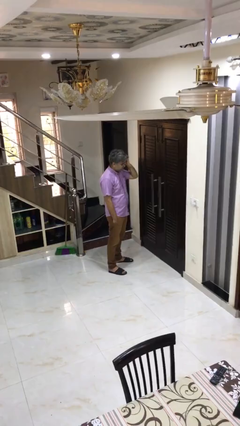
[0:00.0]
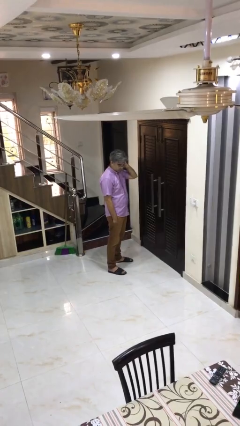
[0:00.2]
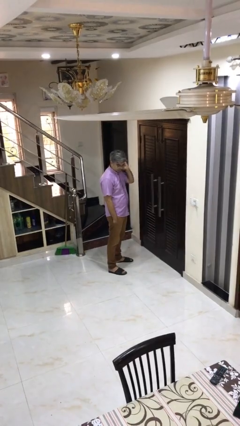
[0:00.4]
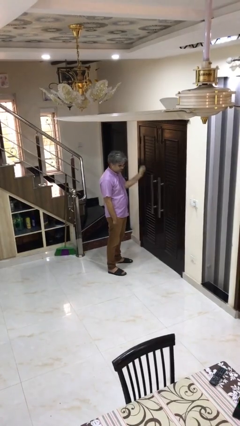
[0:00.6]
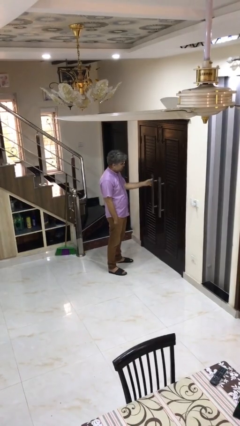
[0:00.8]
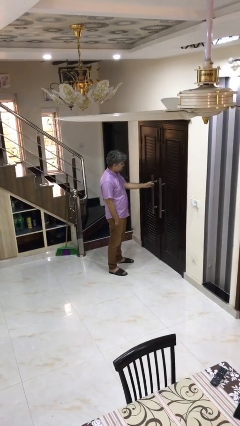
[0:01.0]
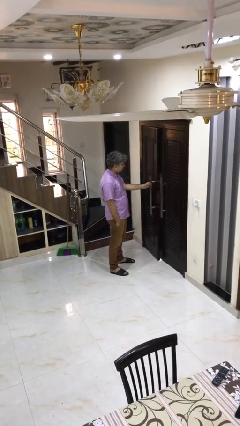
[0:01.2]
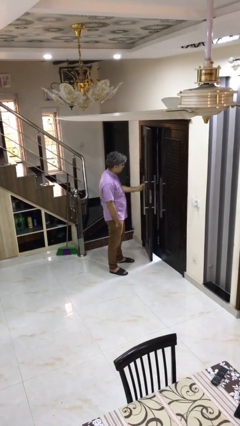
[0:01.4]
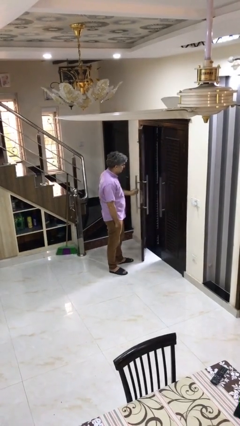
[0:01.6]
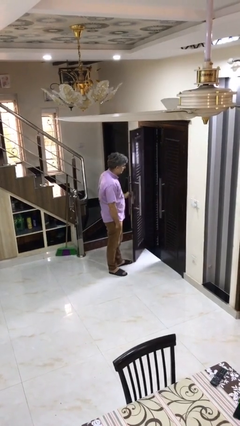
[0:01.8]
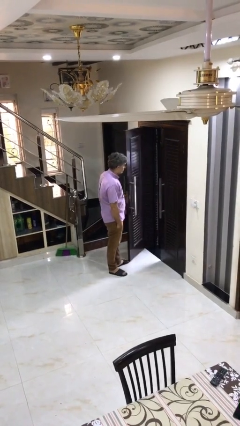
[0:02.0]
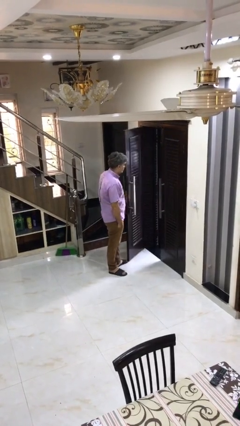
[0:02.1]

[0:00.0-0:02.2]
person opens facility door

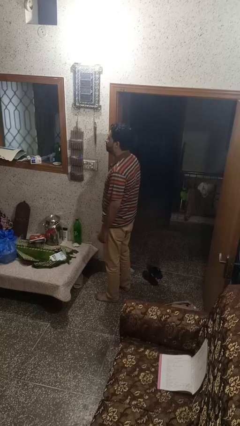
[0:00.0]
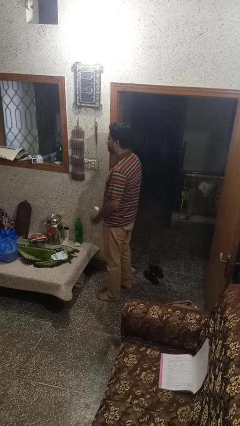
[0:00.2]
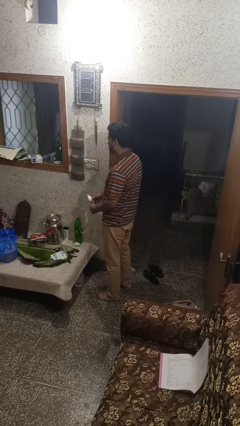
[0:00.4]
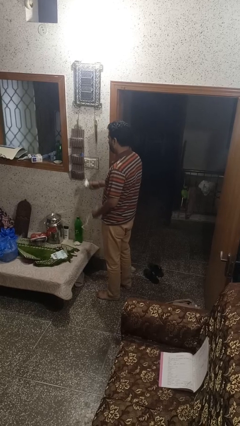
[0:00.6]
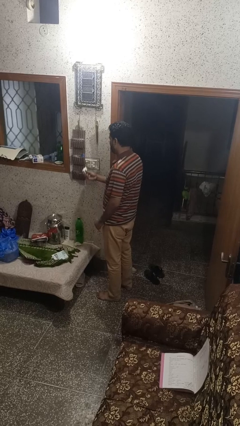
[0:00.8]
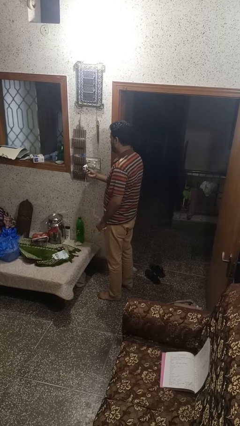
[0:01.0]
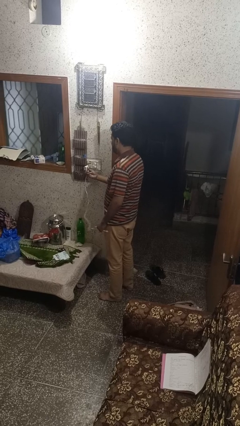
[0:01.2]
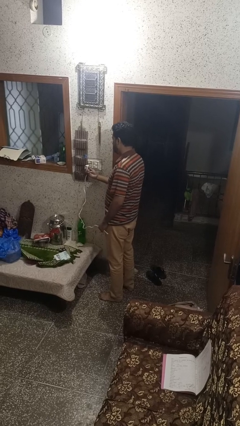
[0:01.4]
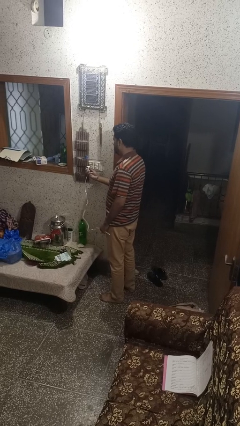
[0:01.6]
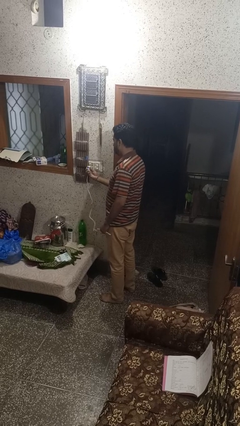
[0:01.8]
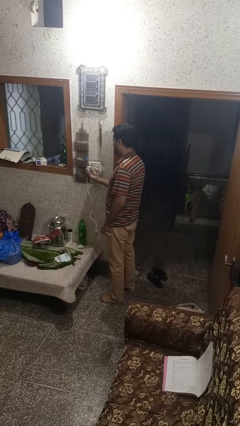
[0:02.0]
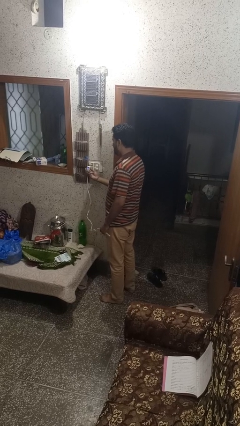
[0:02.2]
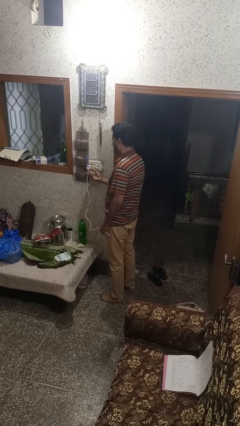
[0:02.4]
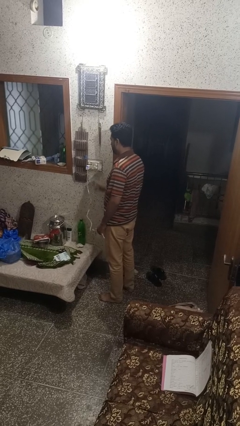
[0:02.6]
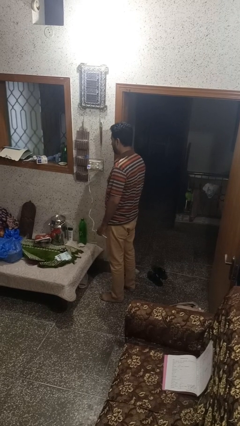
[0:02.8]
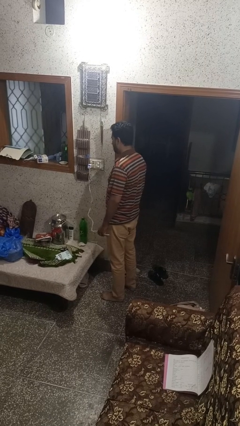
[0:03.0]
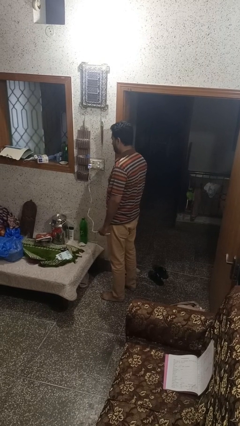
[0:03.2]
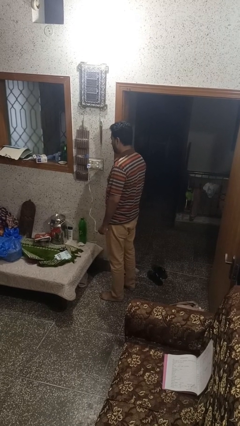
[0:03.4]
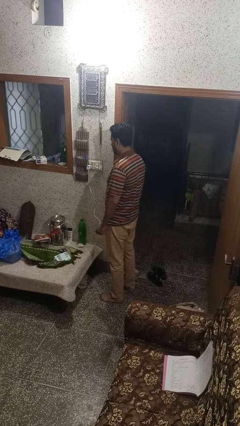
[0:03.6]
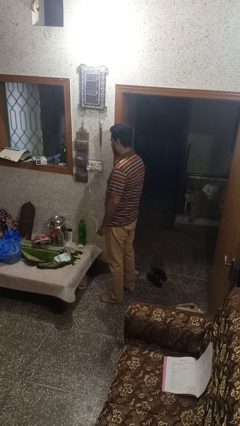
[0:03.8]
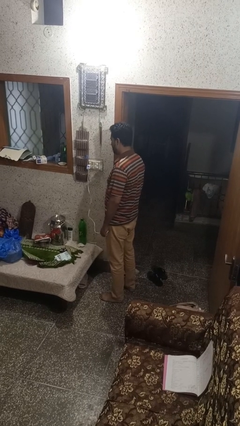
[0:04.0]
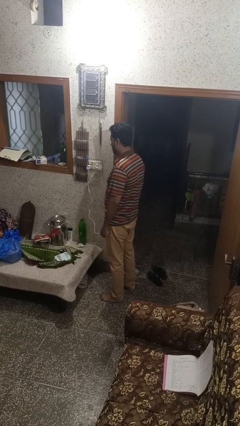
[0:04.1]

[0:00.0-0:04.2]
person plugs into electrical socket

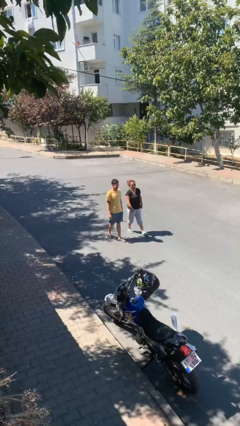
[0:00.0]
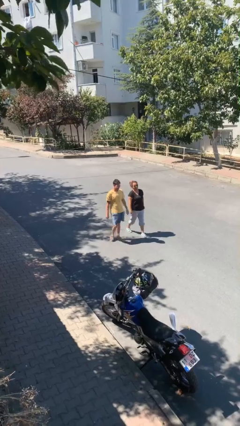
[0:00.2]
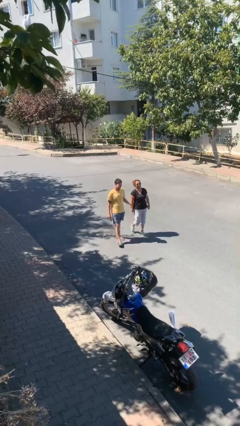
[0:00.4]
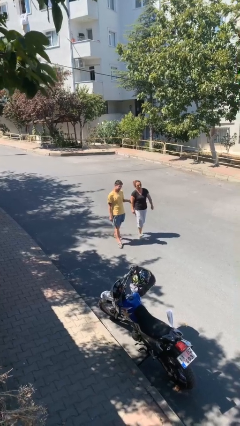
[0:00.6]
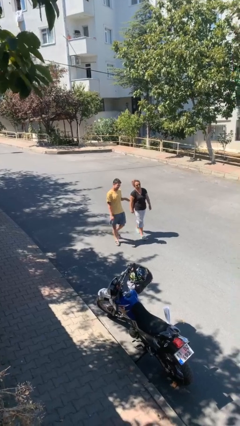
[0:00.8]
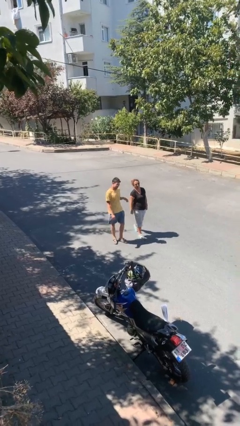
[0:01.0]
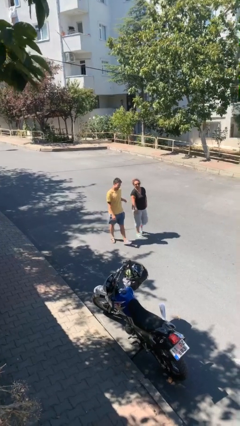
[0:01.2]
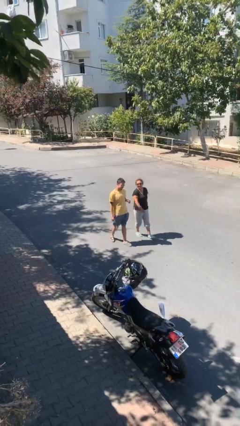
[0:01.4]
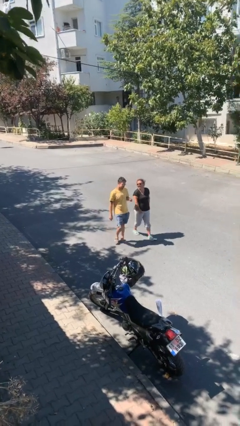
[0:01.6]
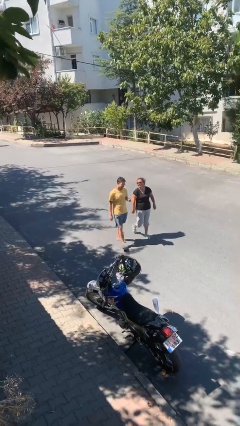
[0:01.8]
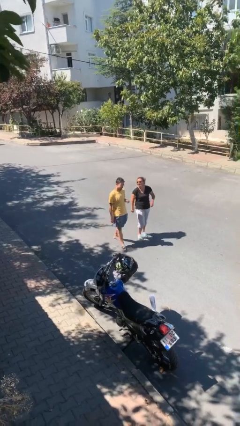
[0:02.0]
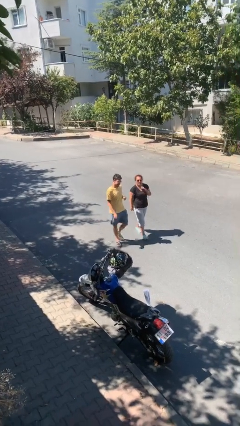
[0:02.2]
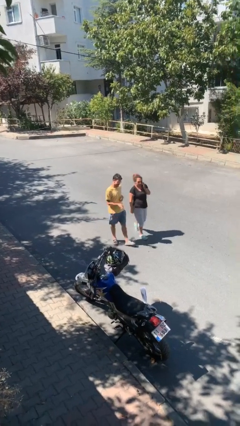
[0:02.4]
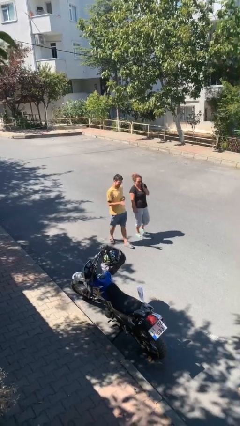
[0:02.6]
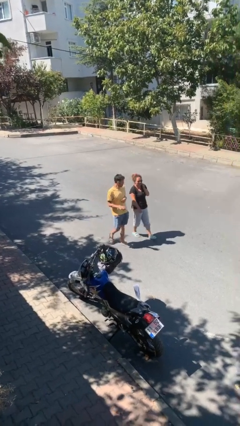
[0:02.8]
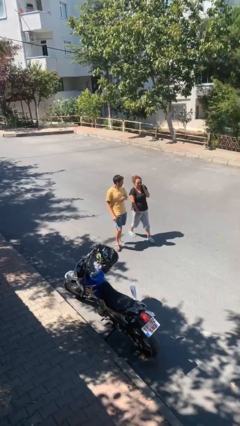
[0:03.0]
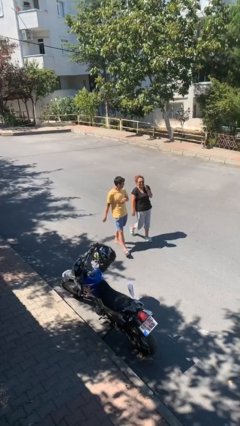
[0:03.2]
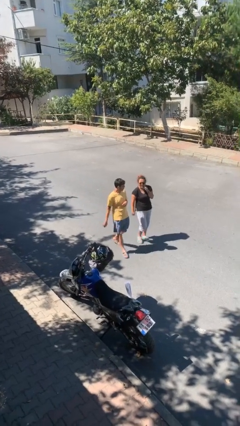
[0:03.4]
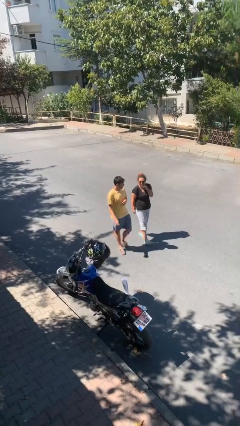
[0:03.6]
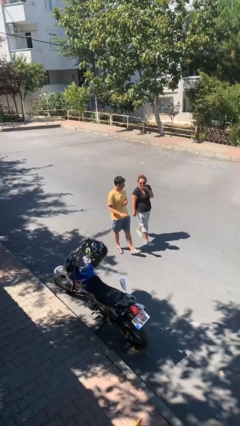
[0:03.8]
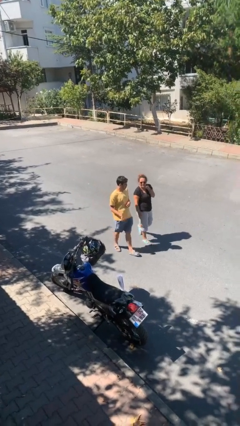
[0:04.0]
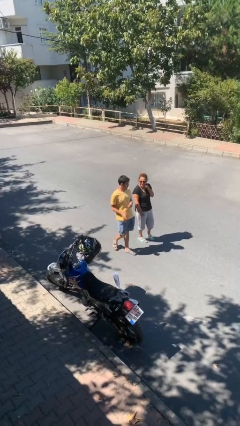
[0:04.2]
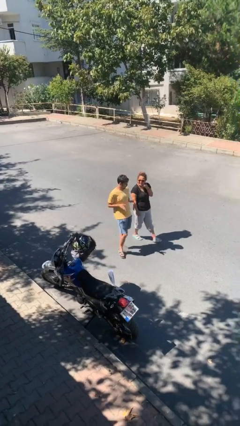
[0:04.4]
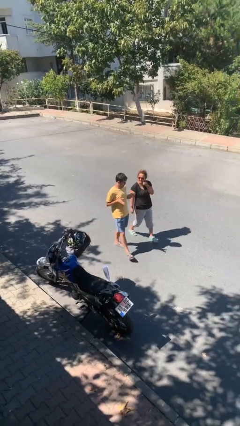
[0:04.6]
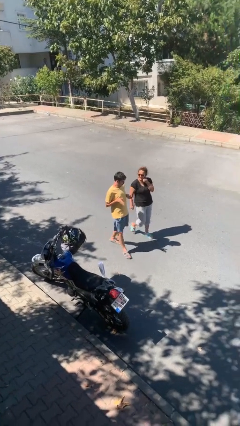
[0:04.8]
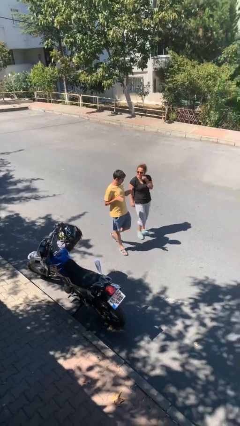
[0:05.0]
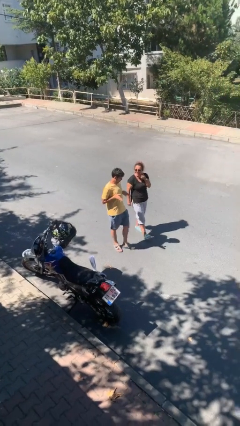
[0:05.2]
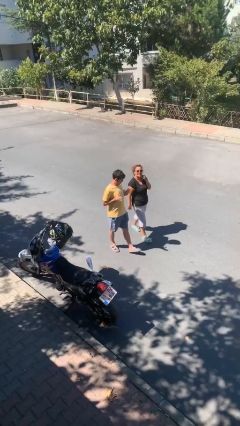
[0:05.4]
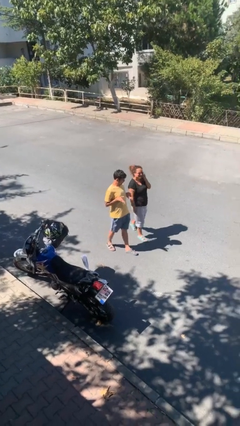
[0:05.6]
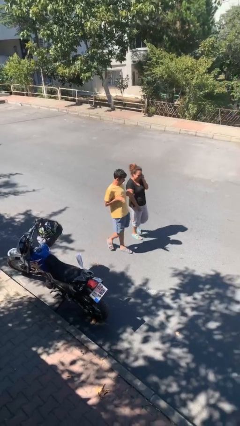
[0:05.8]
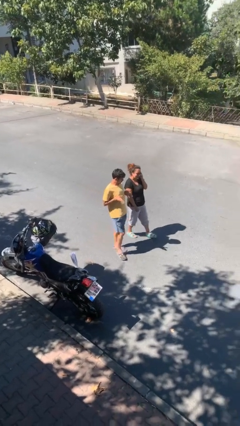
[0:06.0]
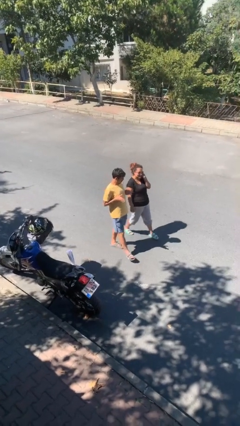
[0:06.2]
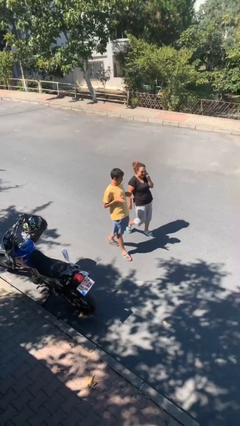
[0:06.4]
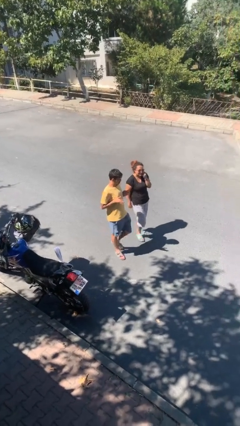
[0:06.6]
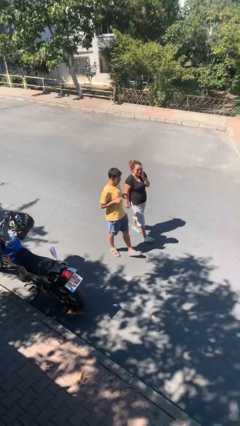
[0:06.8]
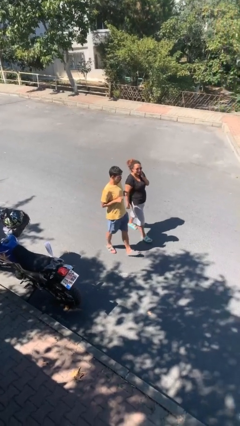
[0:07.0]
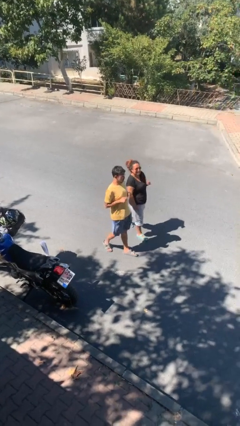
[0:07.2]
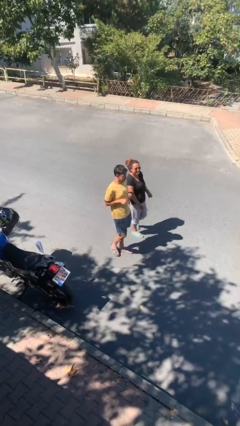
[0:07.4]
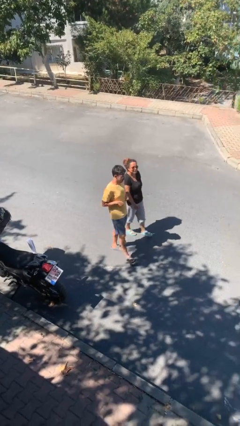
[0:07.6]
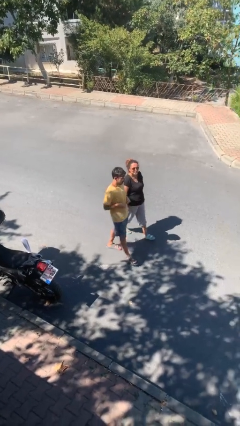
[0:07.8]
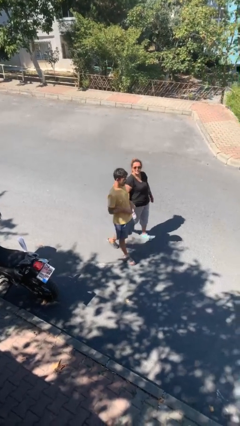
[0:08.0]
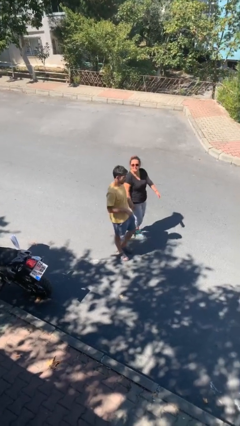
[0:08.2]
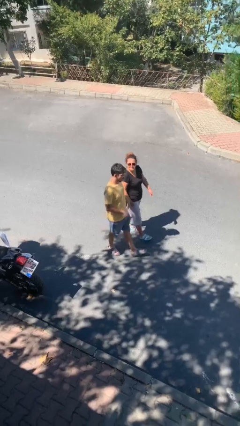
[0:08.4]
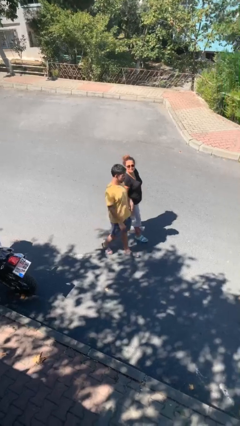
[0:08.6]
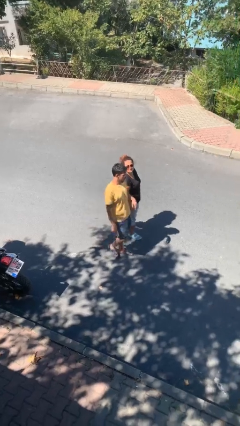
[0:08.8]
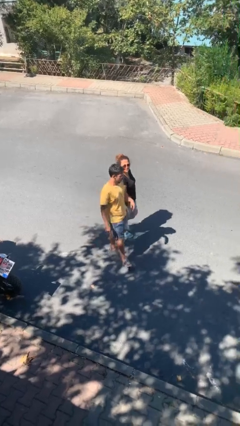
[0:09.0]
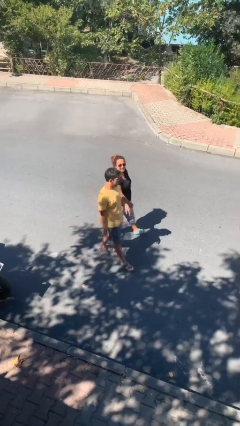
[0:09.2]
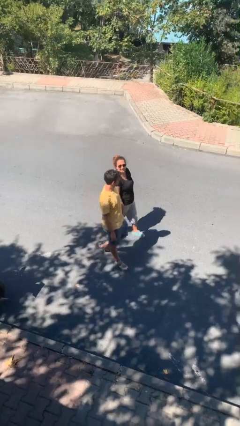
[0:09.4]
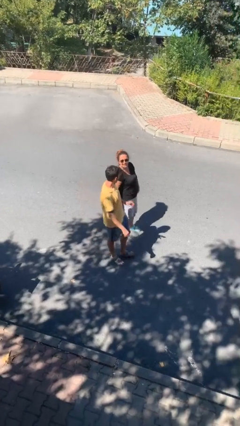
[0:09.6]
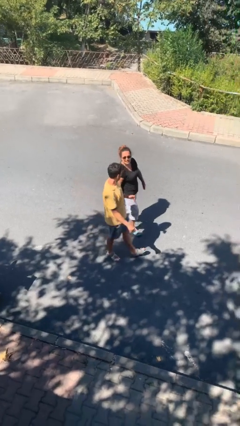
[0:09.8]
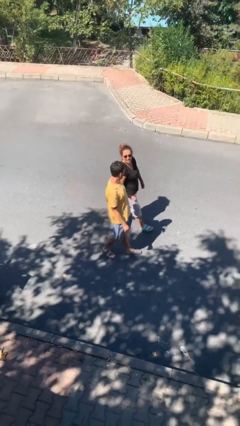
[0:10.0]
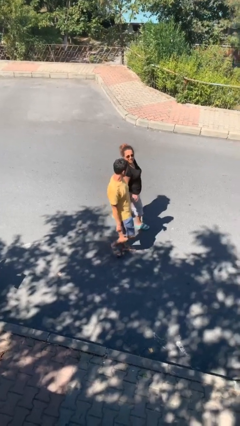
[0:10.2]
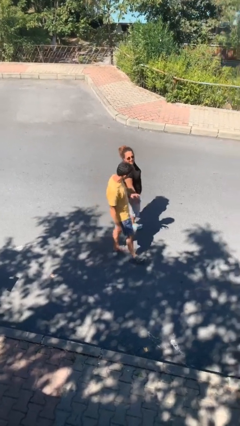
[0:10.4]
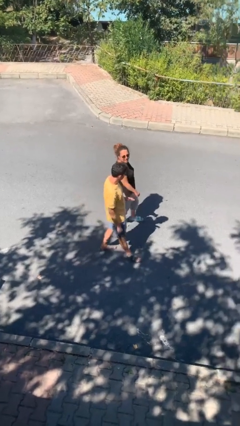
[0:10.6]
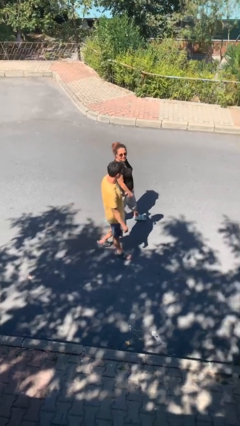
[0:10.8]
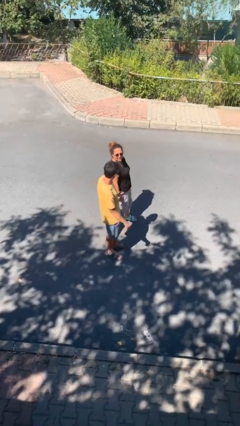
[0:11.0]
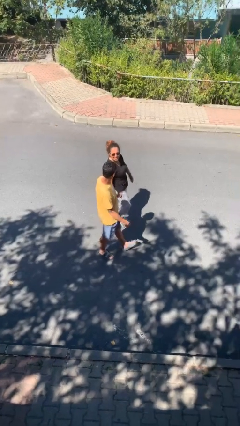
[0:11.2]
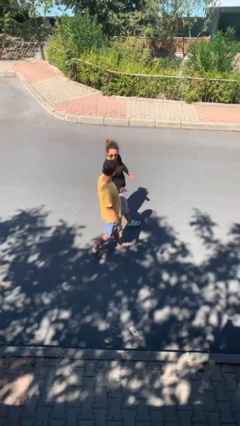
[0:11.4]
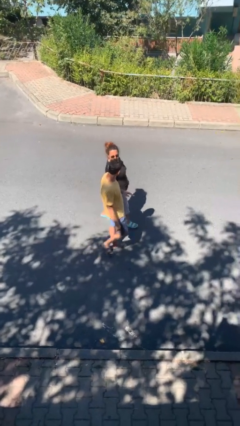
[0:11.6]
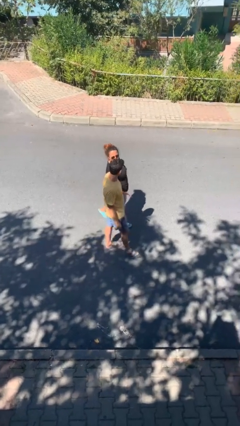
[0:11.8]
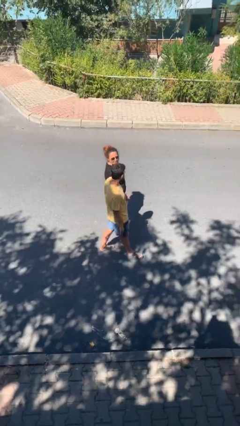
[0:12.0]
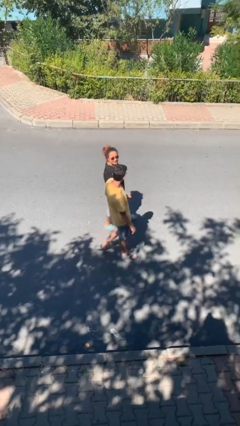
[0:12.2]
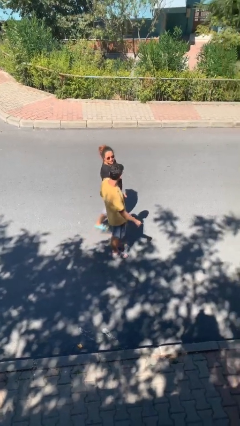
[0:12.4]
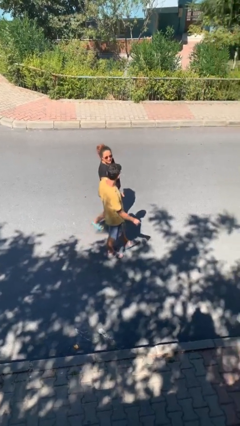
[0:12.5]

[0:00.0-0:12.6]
person talks to person
